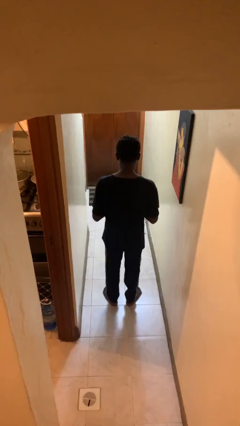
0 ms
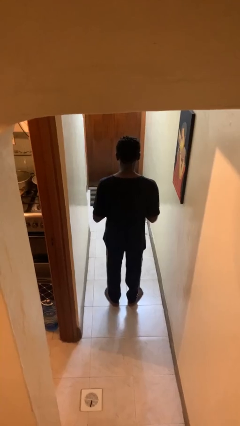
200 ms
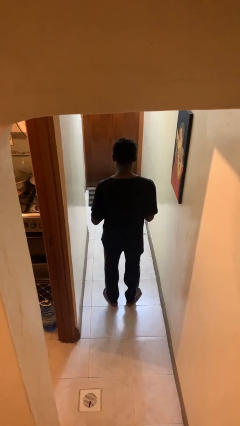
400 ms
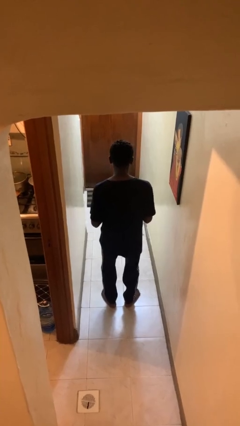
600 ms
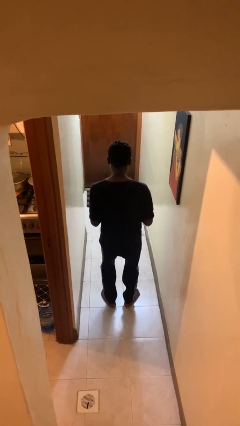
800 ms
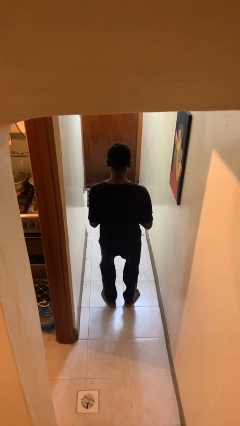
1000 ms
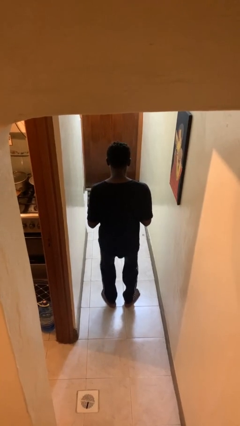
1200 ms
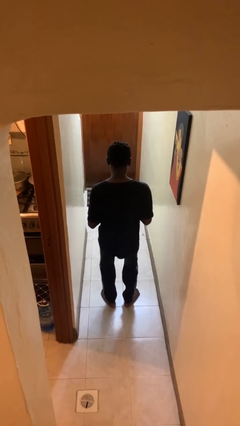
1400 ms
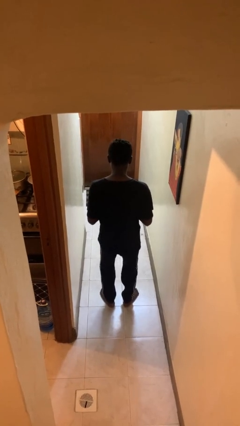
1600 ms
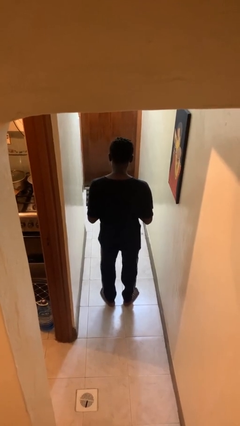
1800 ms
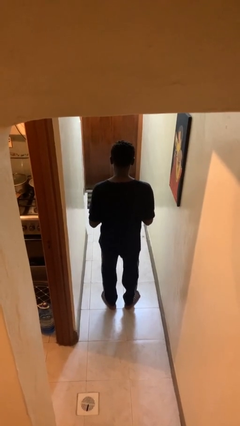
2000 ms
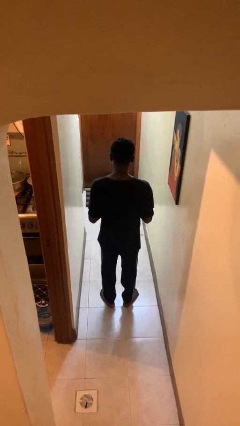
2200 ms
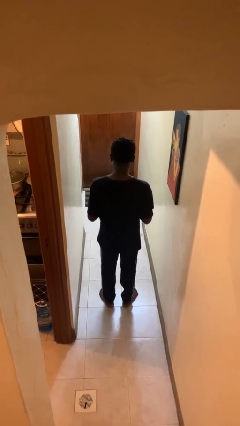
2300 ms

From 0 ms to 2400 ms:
person dances in place

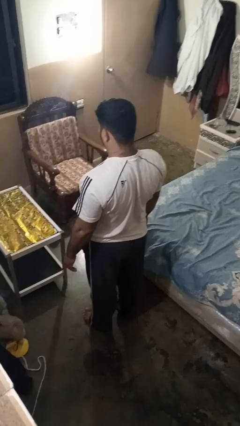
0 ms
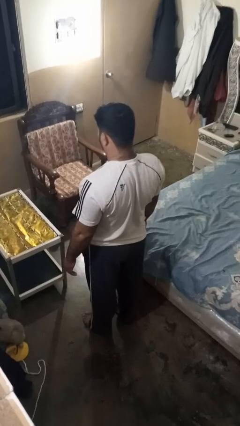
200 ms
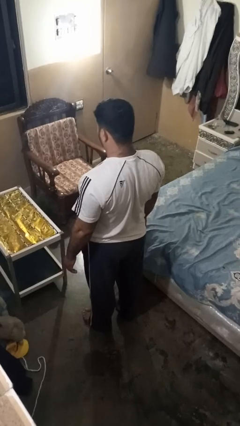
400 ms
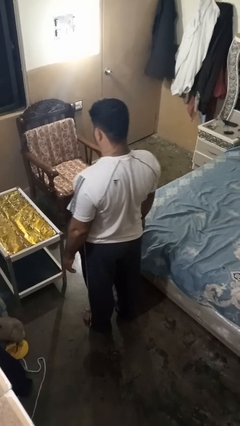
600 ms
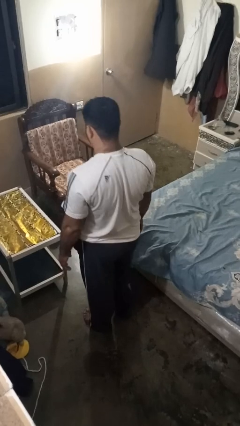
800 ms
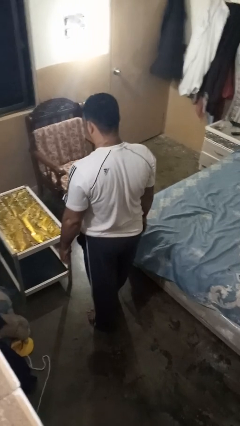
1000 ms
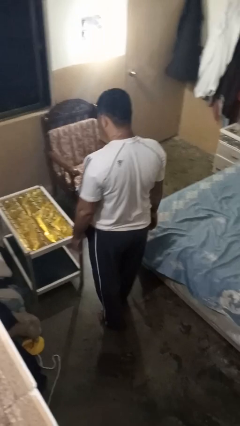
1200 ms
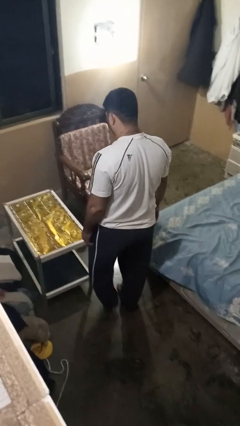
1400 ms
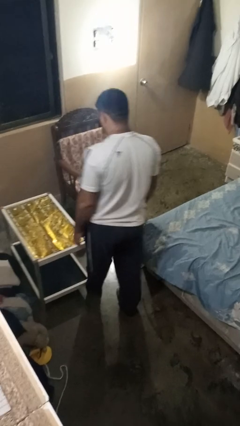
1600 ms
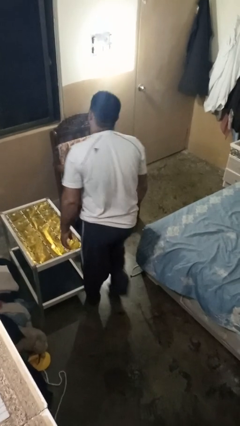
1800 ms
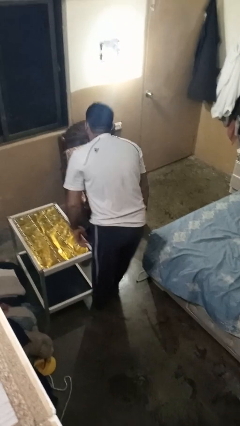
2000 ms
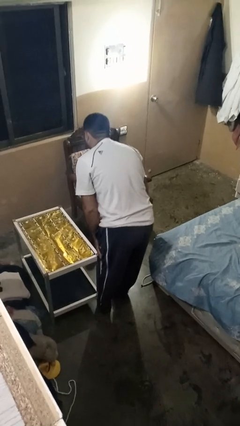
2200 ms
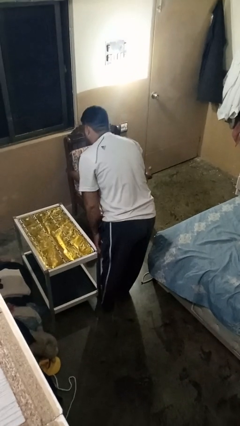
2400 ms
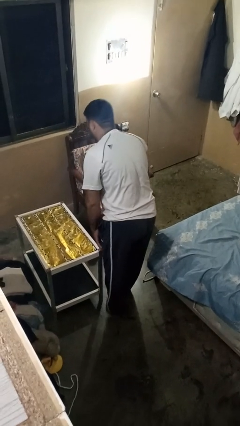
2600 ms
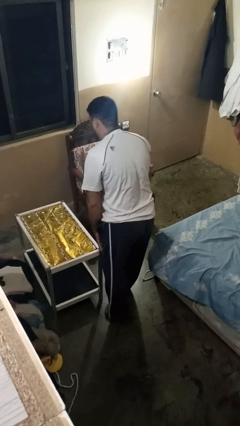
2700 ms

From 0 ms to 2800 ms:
person bumps into table

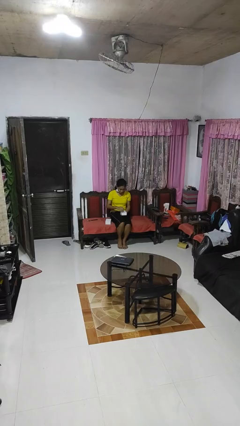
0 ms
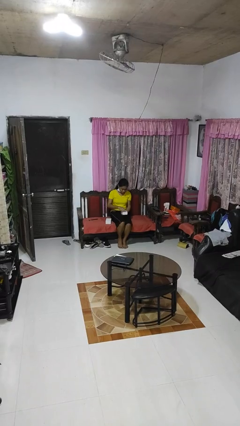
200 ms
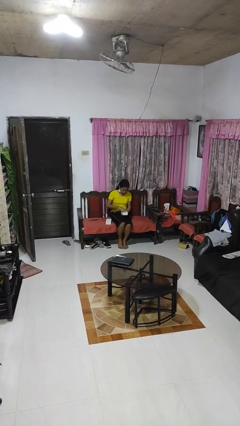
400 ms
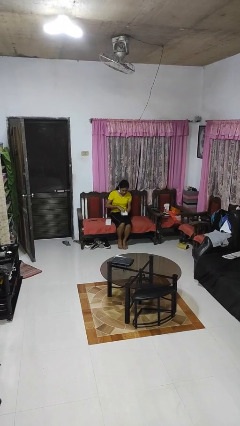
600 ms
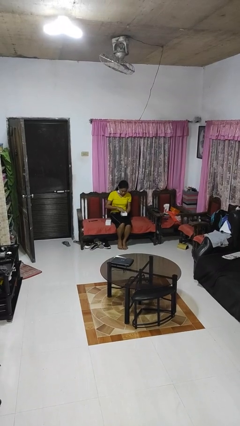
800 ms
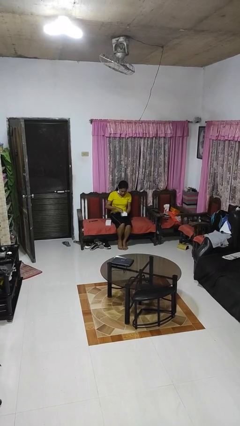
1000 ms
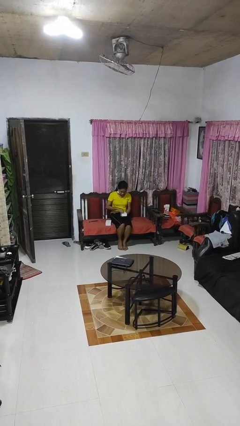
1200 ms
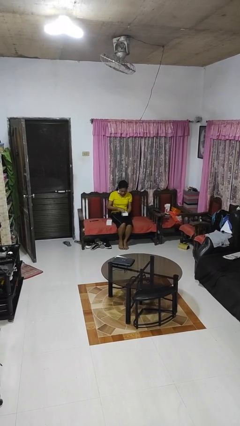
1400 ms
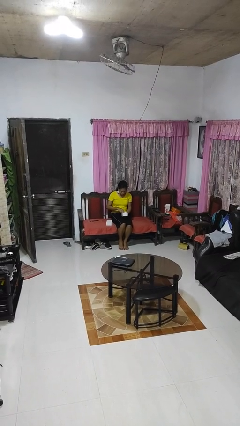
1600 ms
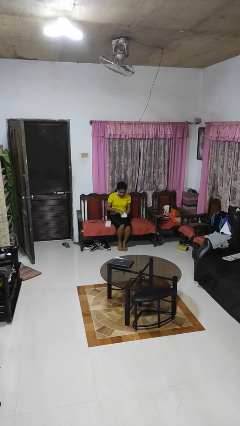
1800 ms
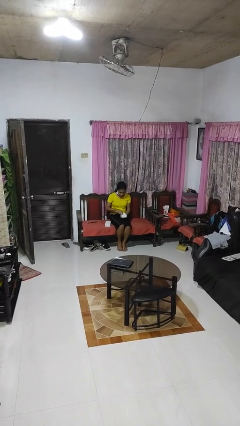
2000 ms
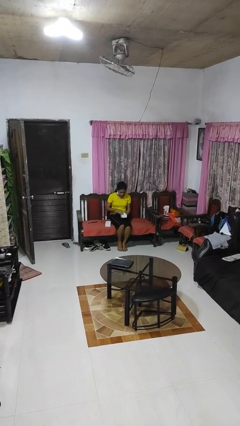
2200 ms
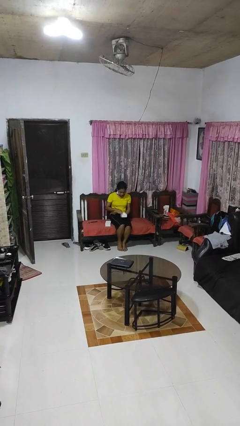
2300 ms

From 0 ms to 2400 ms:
person searches jewelry box

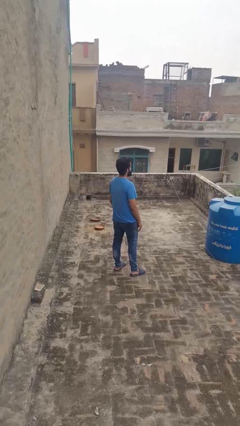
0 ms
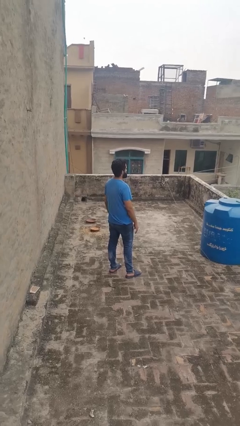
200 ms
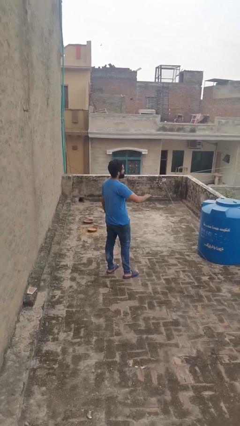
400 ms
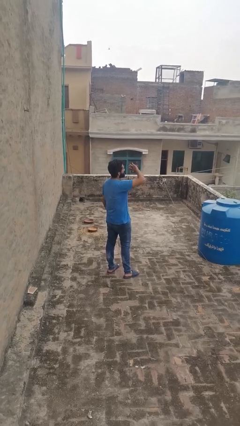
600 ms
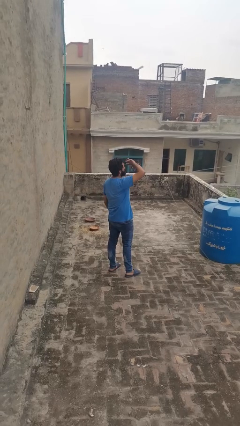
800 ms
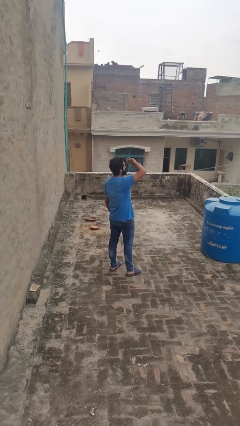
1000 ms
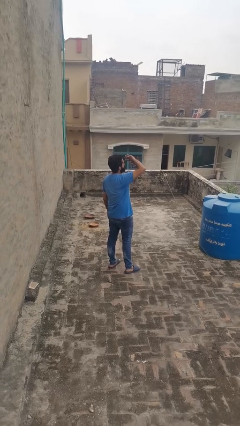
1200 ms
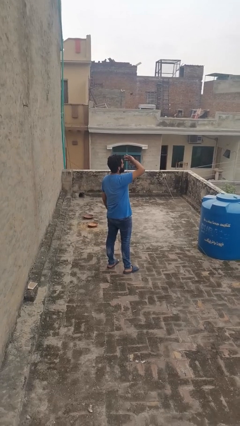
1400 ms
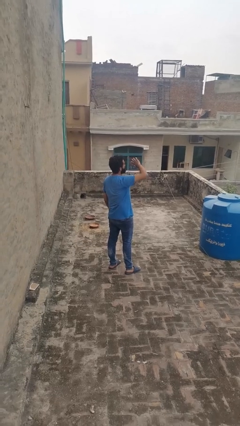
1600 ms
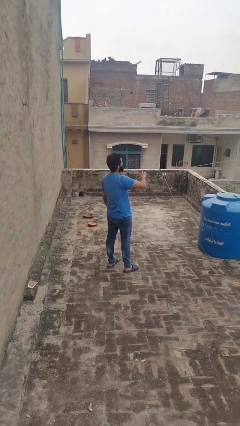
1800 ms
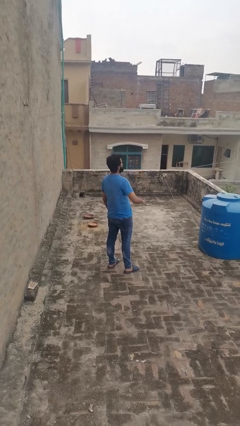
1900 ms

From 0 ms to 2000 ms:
person shades eyes

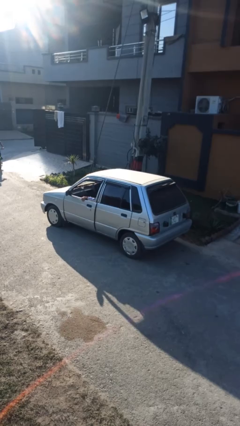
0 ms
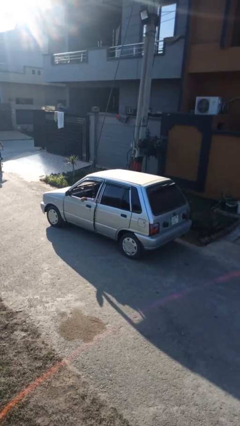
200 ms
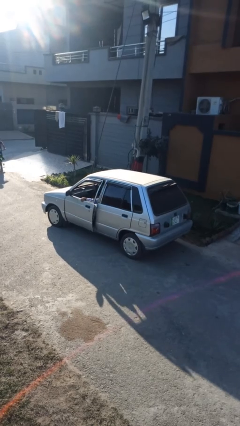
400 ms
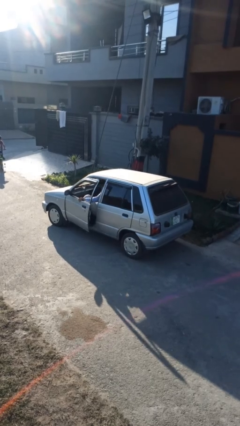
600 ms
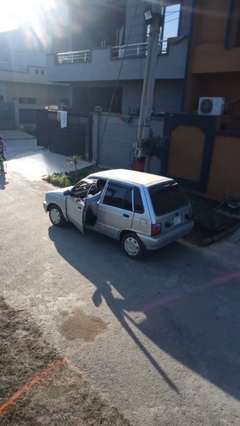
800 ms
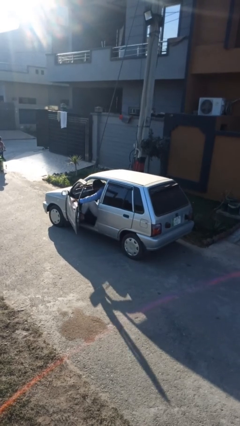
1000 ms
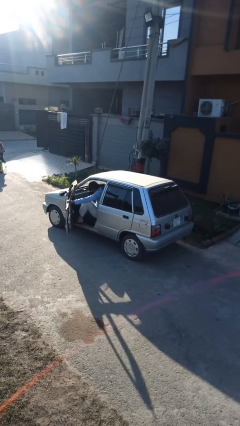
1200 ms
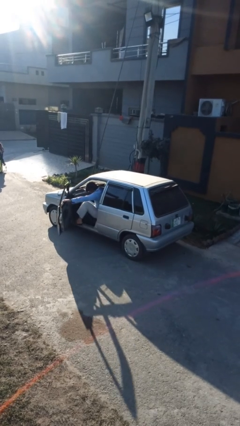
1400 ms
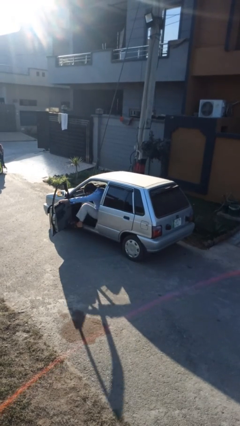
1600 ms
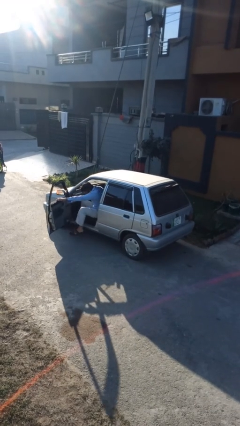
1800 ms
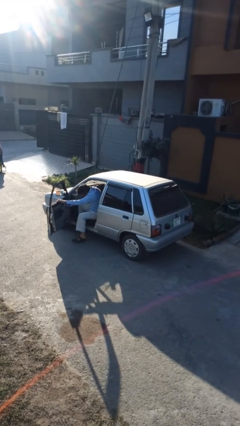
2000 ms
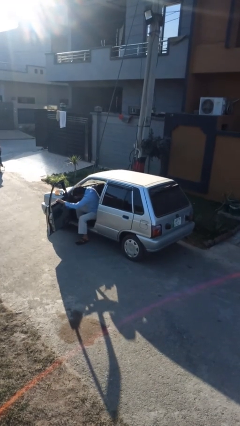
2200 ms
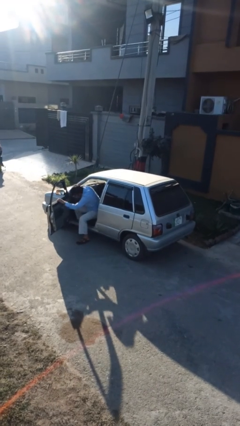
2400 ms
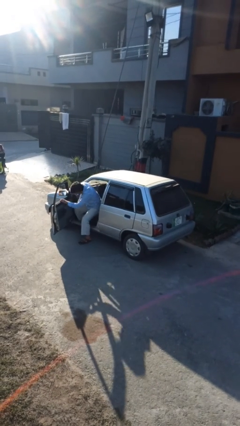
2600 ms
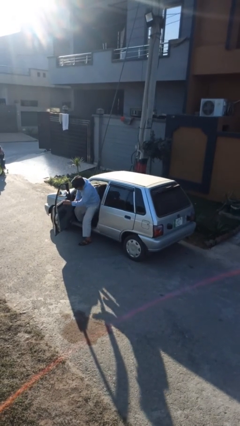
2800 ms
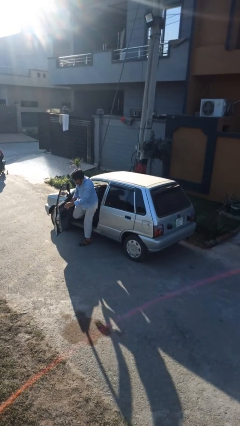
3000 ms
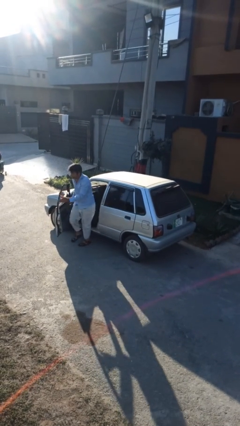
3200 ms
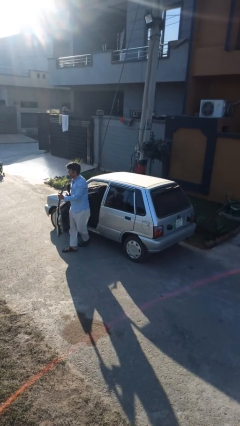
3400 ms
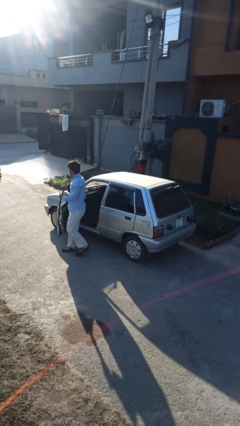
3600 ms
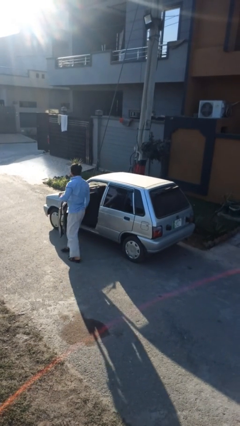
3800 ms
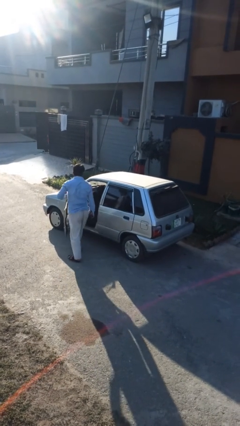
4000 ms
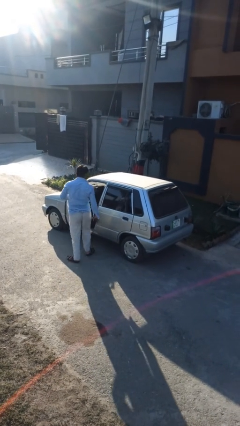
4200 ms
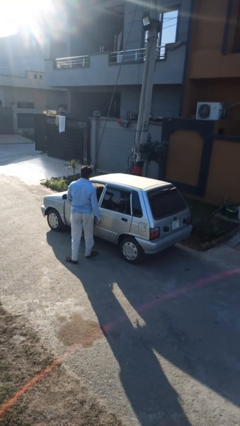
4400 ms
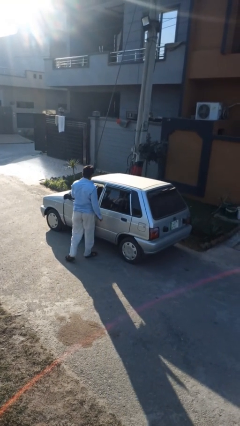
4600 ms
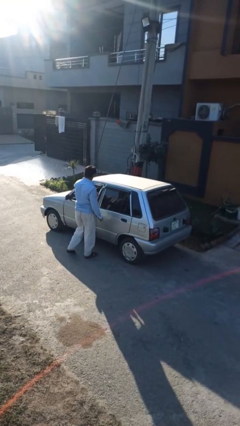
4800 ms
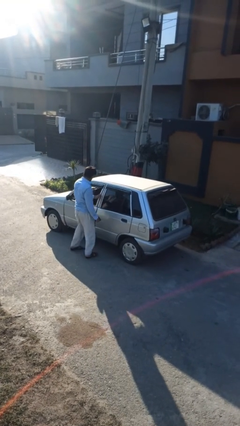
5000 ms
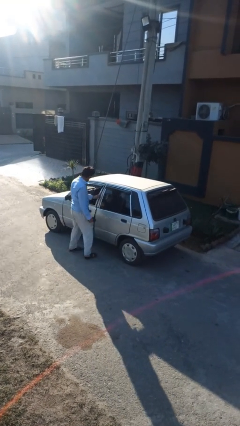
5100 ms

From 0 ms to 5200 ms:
car drops off person

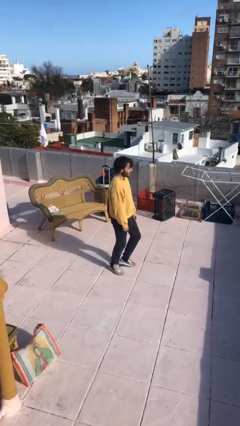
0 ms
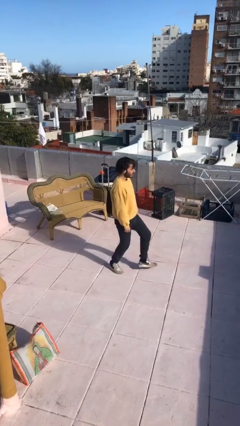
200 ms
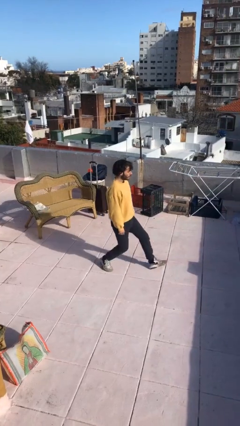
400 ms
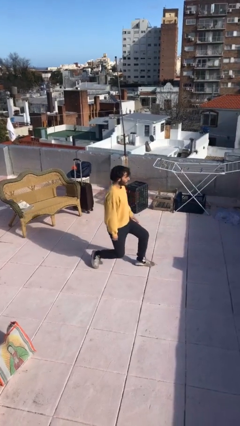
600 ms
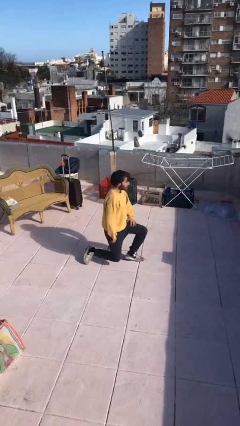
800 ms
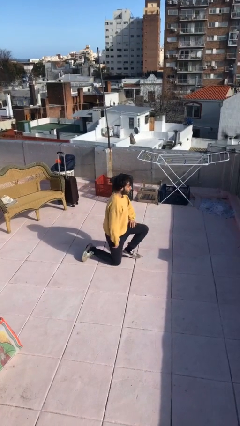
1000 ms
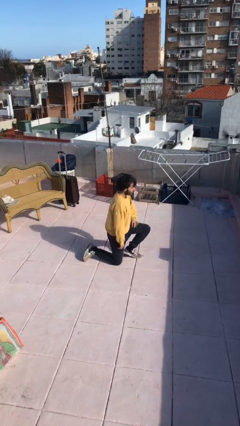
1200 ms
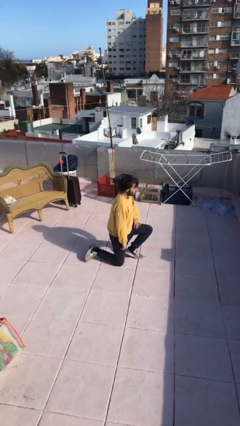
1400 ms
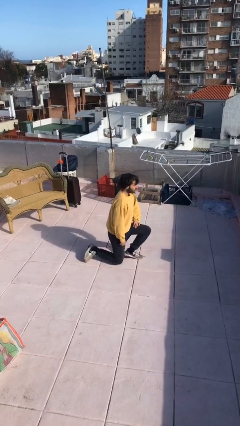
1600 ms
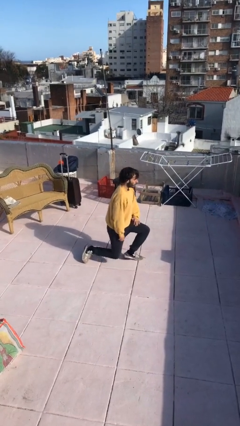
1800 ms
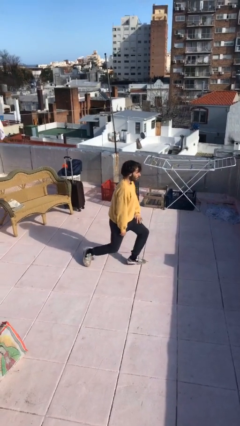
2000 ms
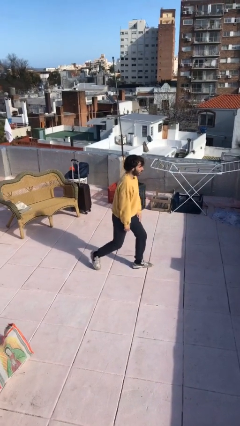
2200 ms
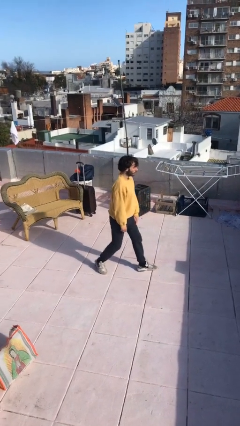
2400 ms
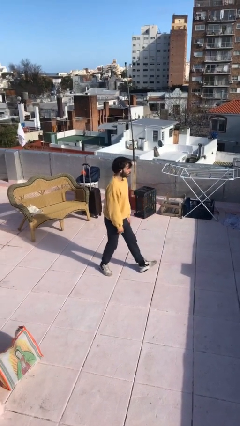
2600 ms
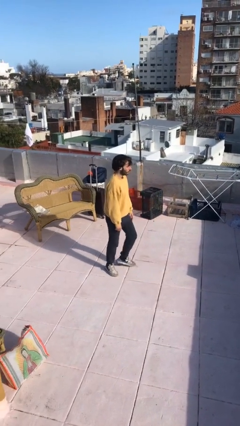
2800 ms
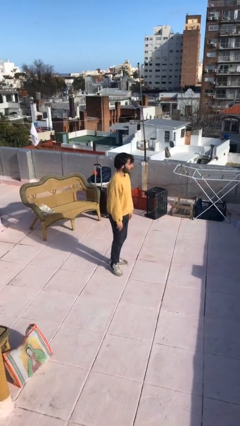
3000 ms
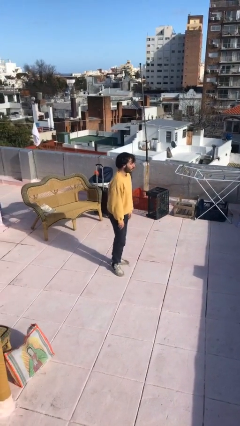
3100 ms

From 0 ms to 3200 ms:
person exercises with lunges
